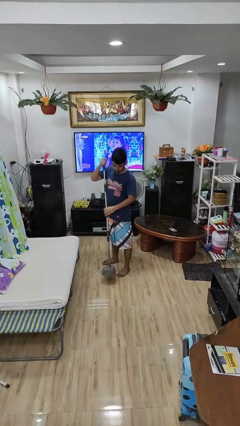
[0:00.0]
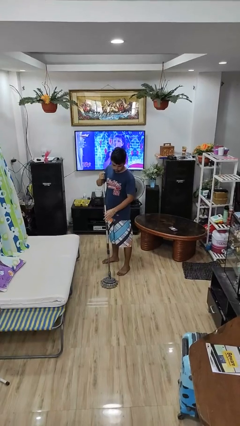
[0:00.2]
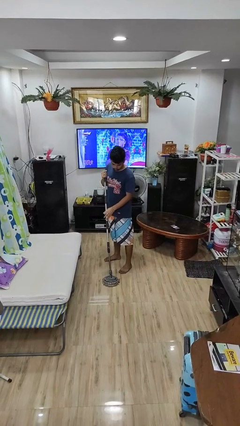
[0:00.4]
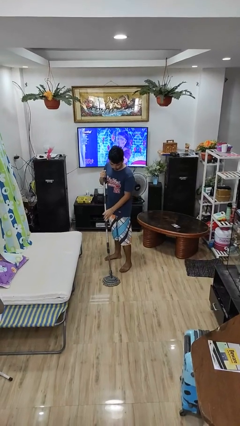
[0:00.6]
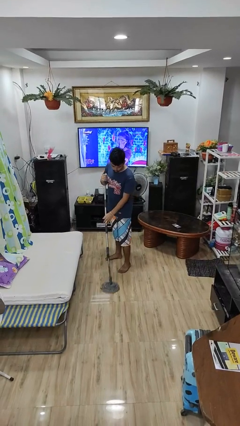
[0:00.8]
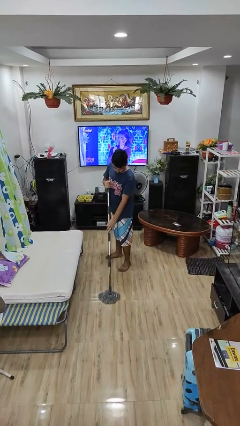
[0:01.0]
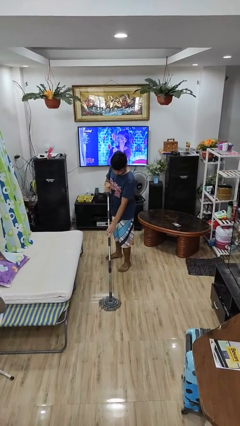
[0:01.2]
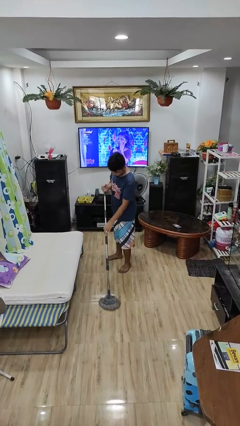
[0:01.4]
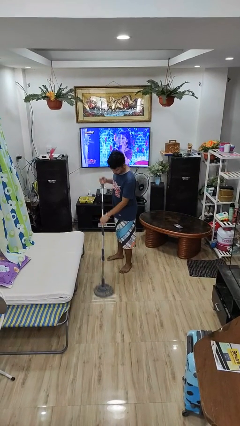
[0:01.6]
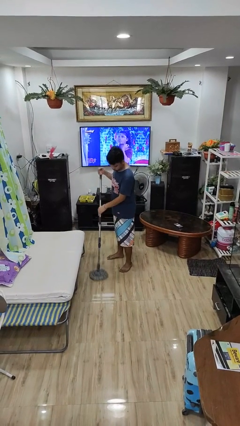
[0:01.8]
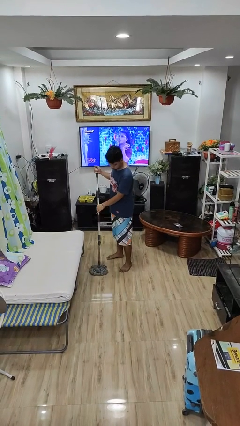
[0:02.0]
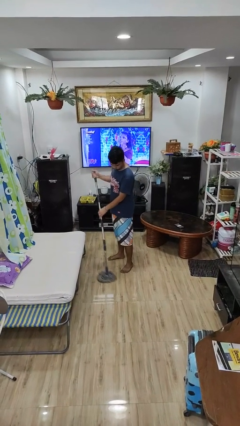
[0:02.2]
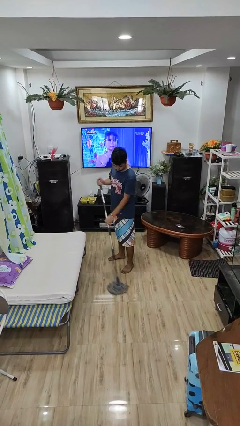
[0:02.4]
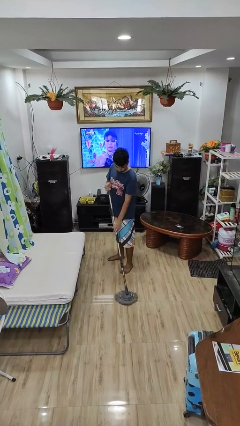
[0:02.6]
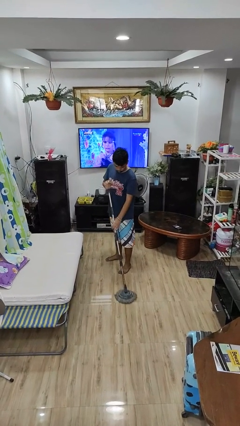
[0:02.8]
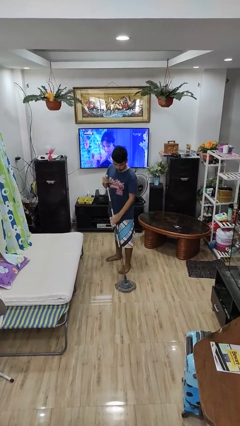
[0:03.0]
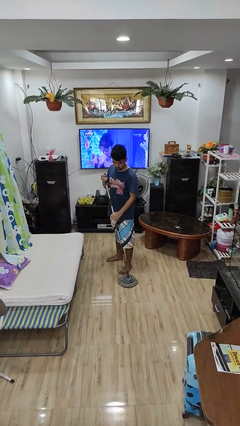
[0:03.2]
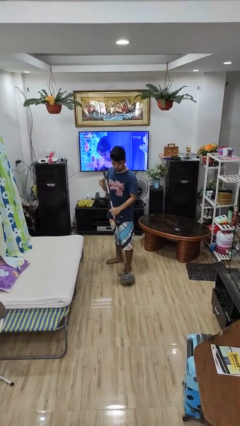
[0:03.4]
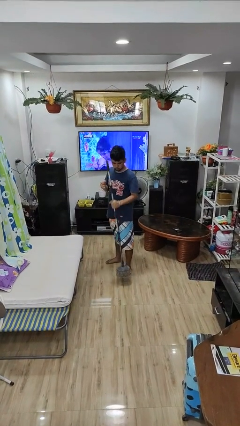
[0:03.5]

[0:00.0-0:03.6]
person mops

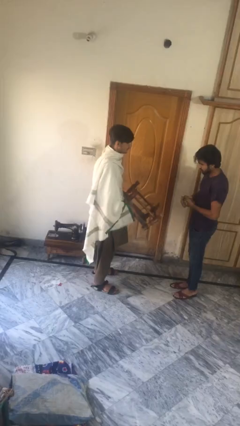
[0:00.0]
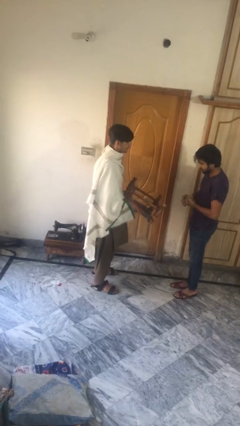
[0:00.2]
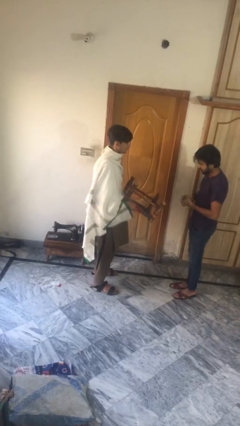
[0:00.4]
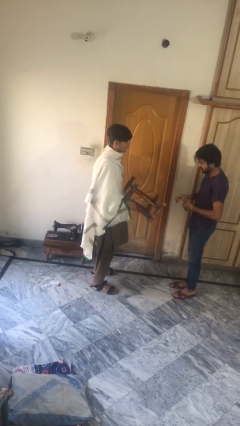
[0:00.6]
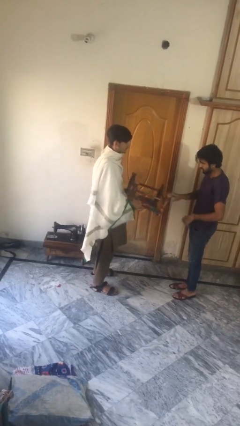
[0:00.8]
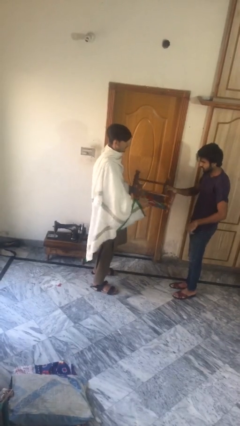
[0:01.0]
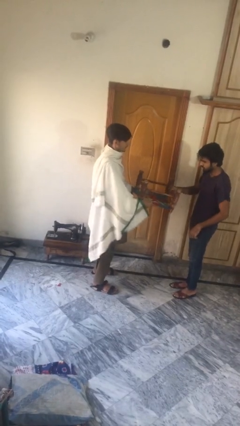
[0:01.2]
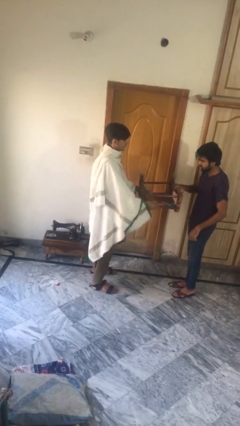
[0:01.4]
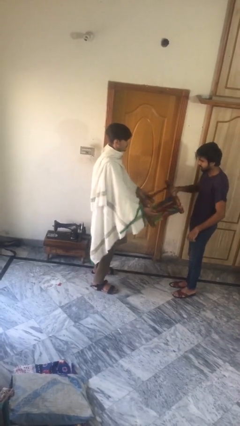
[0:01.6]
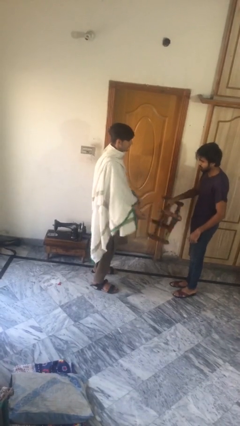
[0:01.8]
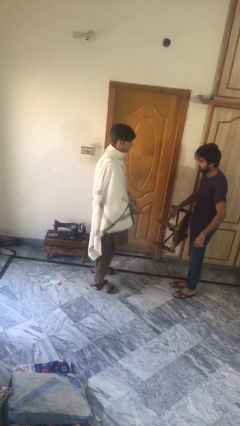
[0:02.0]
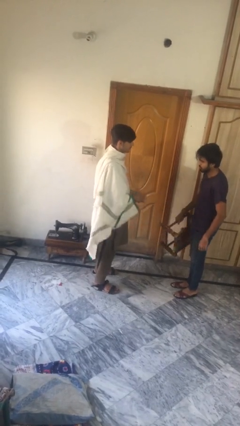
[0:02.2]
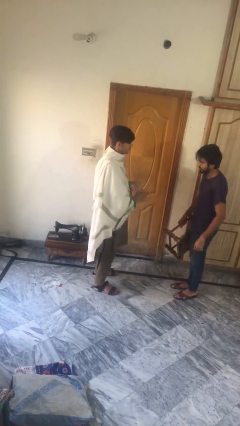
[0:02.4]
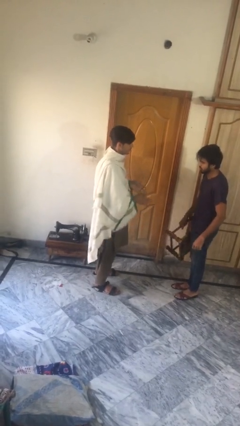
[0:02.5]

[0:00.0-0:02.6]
person transfers object to person

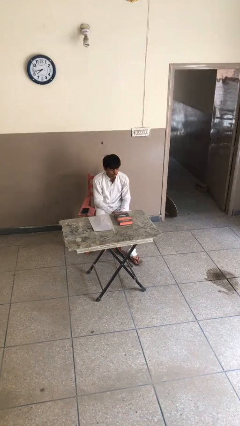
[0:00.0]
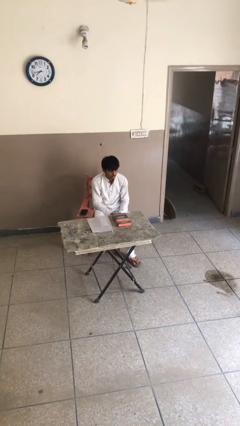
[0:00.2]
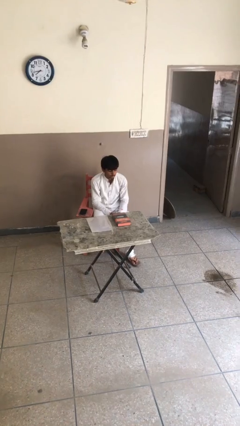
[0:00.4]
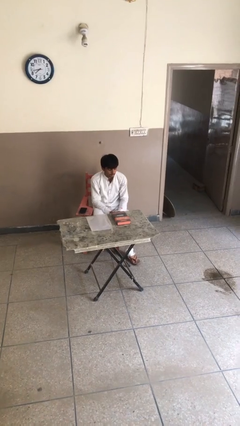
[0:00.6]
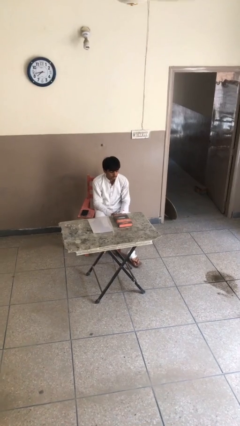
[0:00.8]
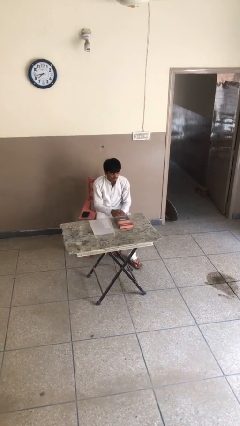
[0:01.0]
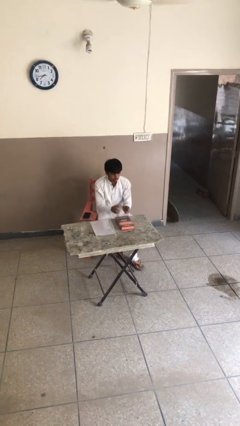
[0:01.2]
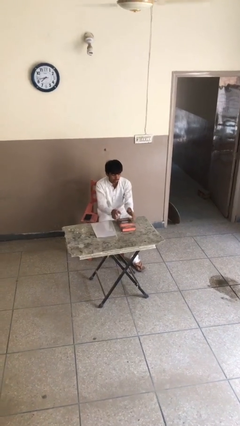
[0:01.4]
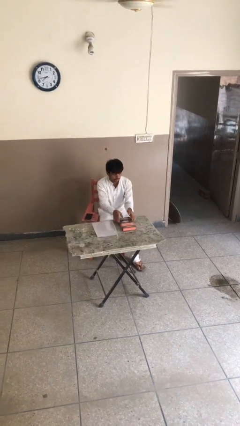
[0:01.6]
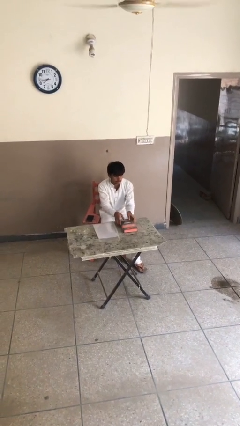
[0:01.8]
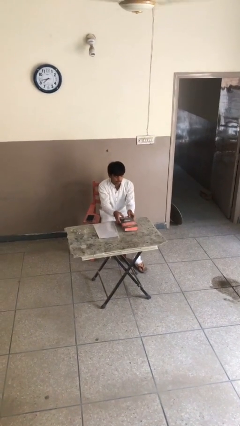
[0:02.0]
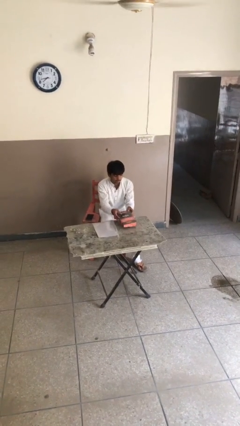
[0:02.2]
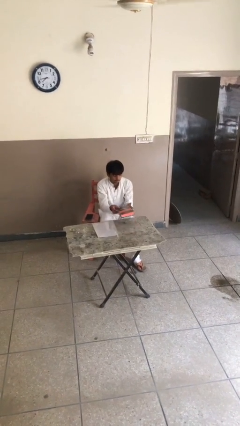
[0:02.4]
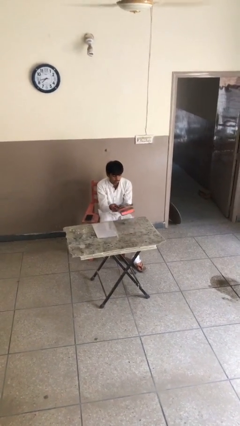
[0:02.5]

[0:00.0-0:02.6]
person picks up object from table

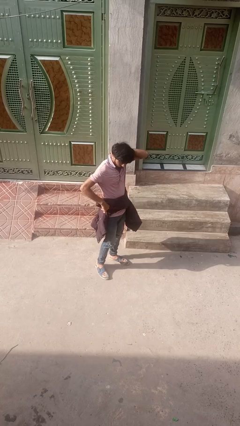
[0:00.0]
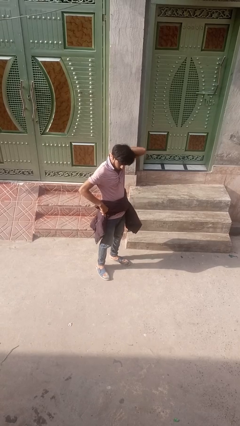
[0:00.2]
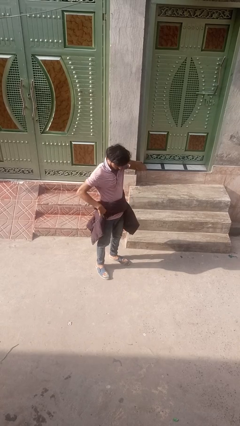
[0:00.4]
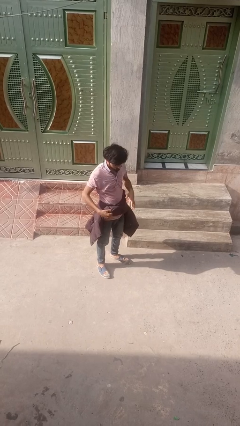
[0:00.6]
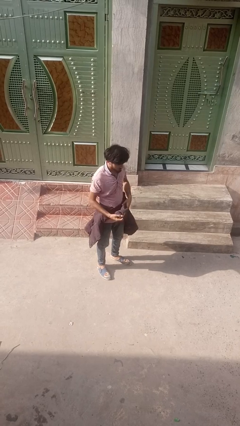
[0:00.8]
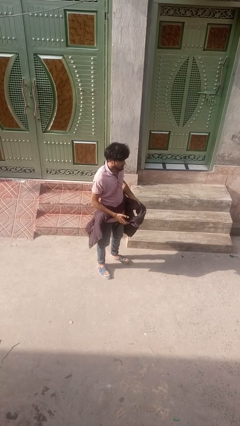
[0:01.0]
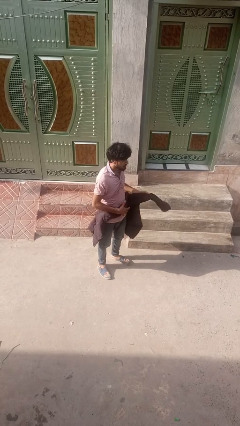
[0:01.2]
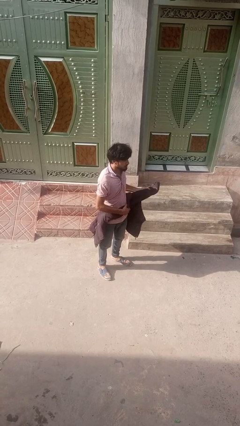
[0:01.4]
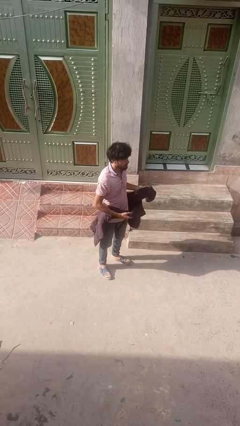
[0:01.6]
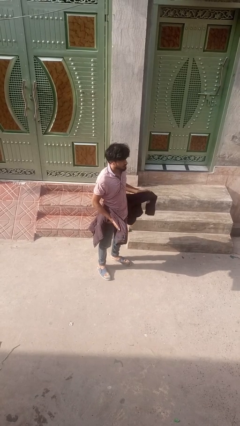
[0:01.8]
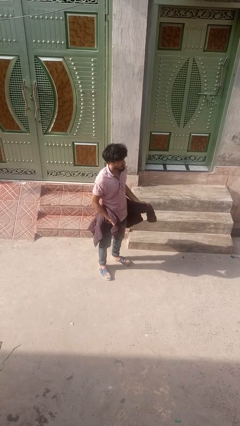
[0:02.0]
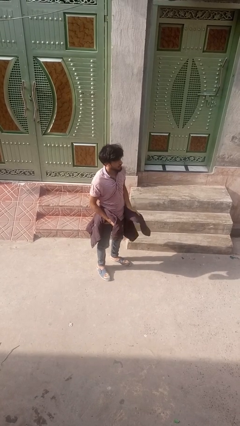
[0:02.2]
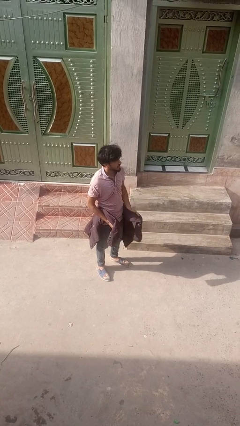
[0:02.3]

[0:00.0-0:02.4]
person unties jacket around waist

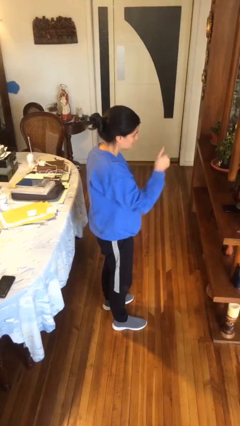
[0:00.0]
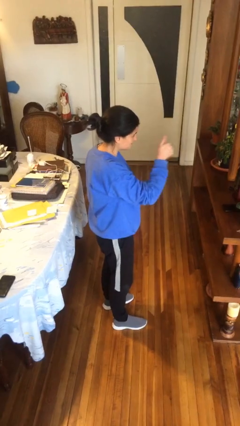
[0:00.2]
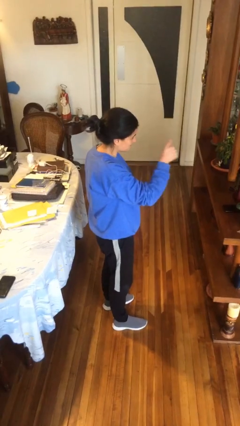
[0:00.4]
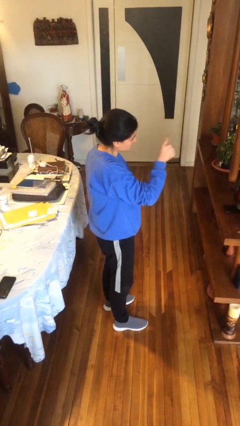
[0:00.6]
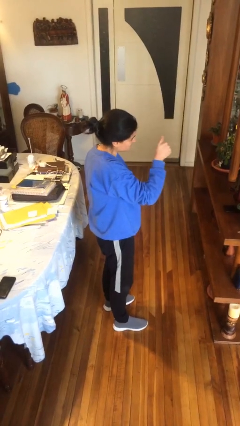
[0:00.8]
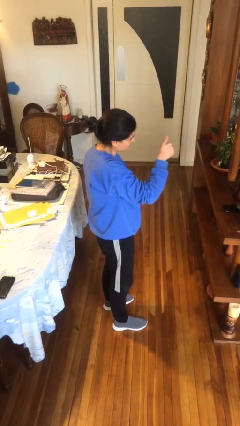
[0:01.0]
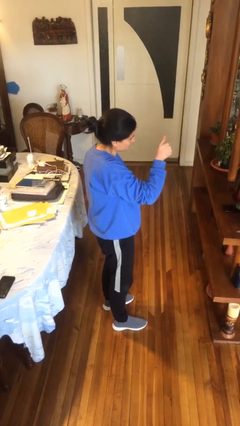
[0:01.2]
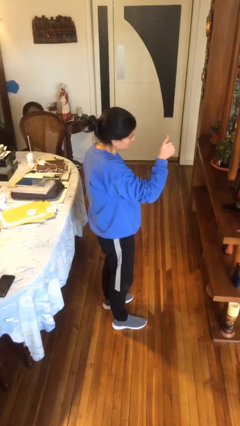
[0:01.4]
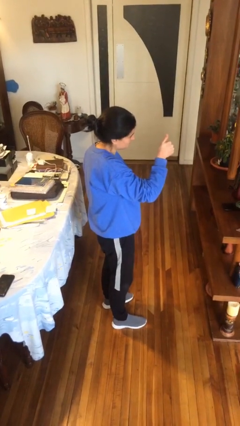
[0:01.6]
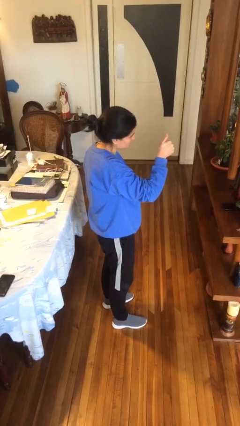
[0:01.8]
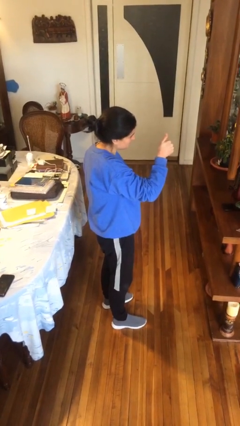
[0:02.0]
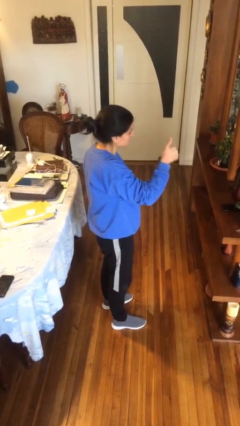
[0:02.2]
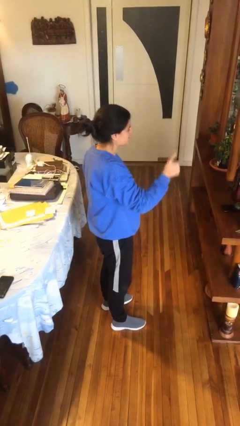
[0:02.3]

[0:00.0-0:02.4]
person gestures thumbs up

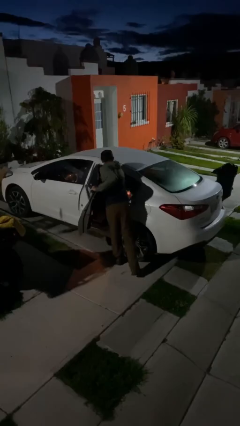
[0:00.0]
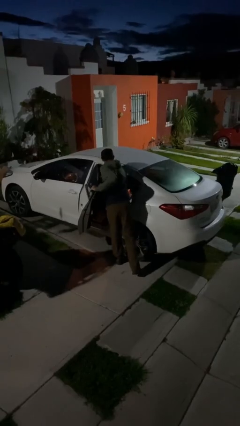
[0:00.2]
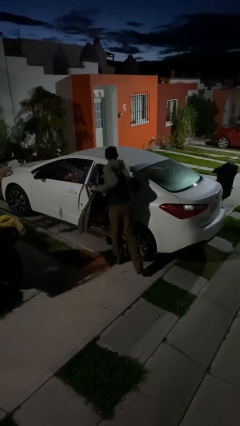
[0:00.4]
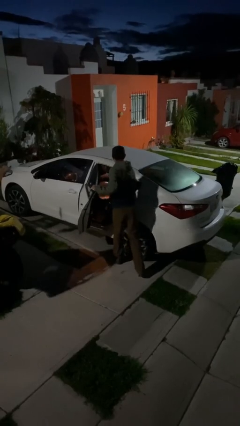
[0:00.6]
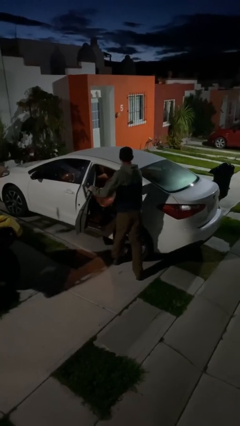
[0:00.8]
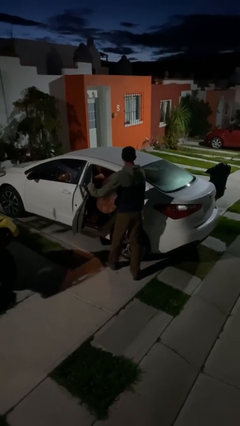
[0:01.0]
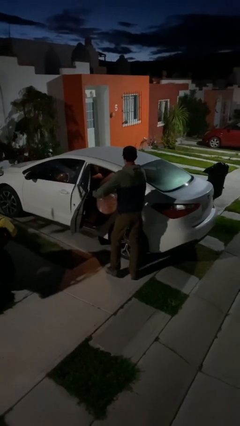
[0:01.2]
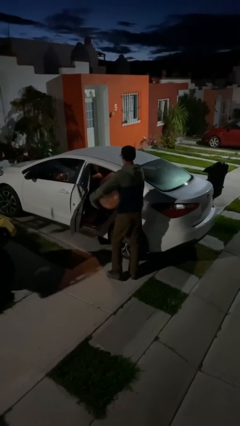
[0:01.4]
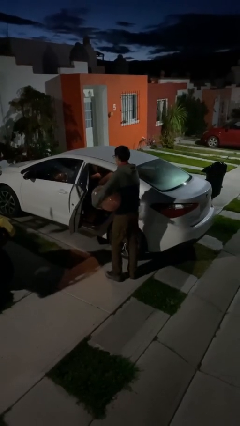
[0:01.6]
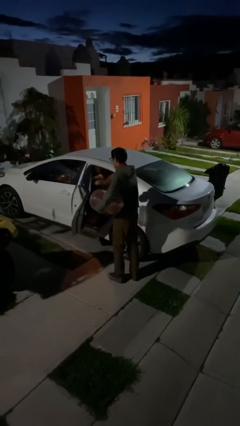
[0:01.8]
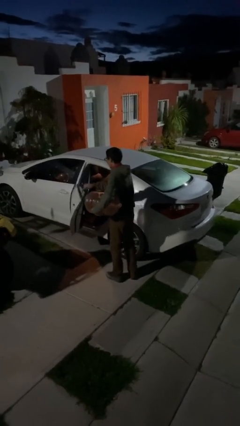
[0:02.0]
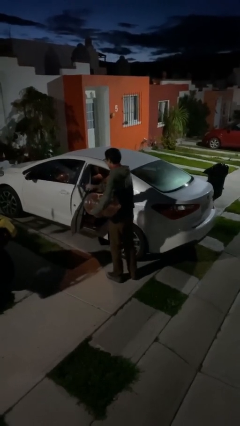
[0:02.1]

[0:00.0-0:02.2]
person unloads car

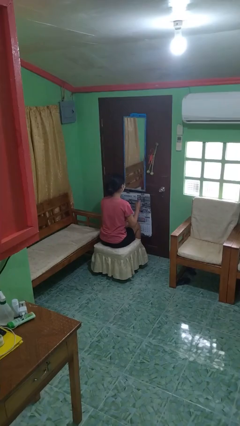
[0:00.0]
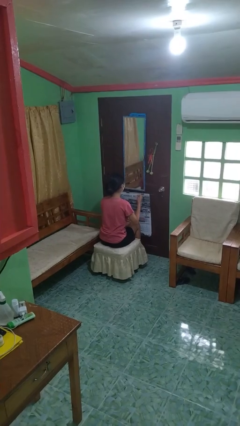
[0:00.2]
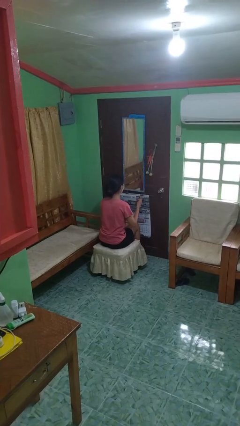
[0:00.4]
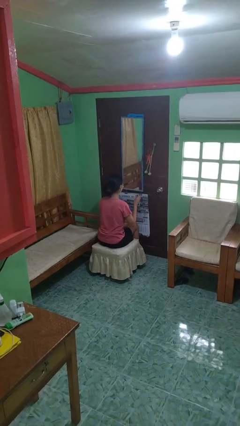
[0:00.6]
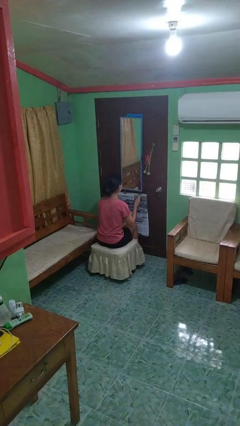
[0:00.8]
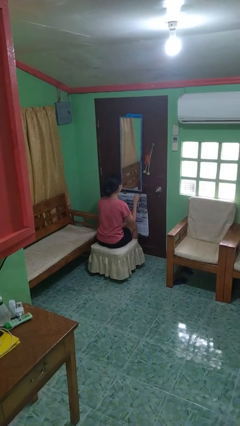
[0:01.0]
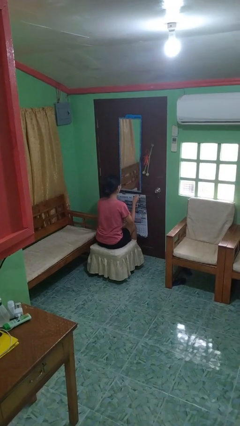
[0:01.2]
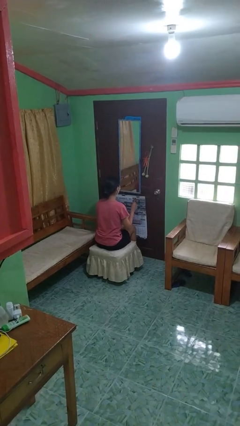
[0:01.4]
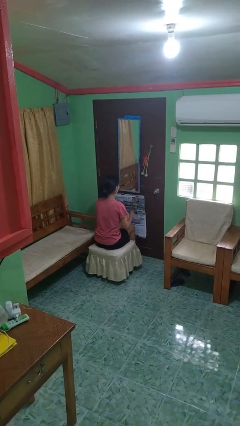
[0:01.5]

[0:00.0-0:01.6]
person snaps fingers
